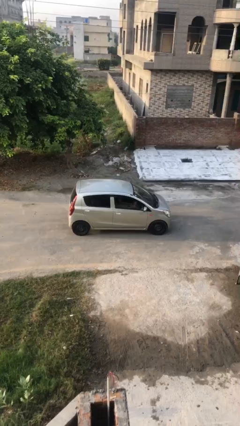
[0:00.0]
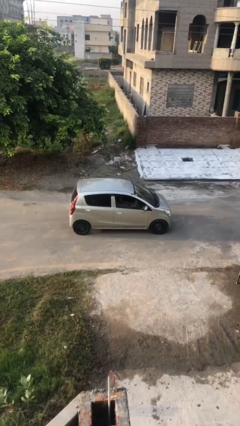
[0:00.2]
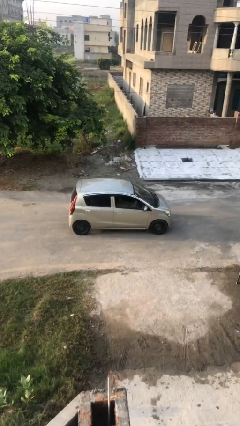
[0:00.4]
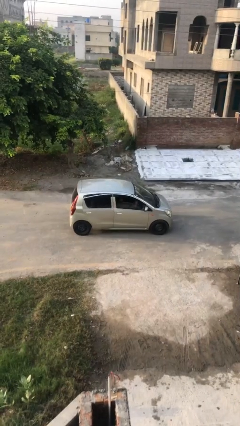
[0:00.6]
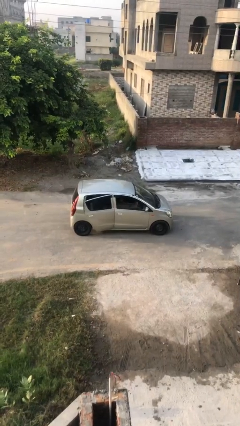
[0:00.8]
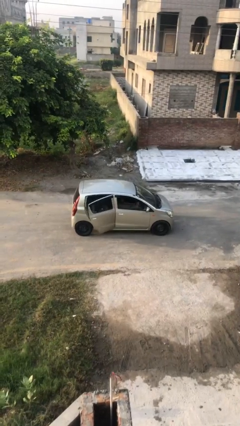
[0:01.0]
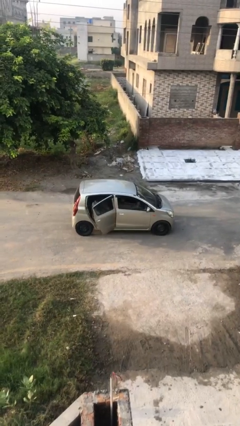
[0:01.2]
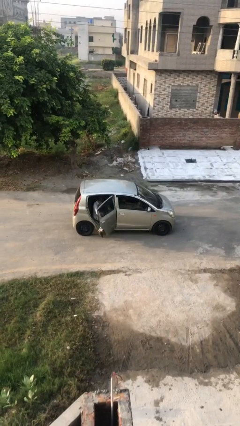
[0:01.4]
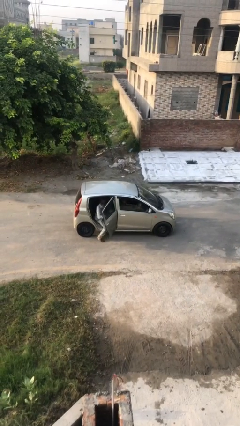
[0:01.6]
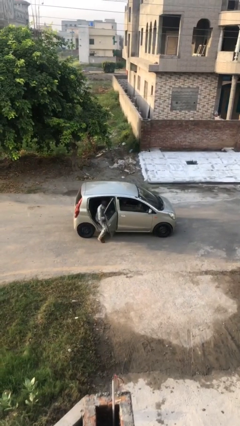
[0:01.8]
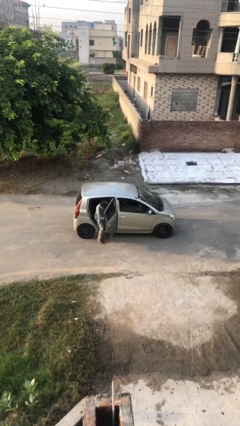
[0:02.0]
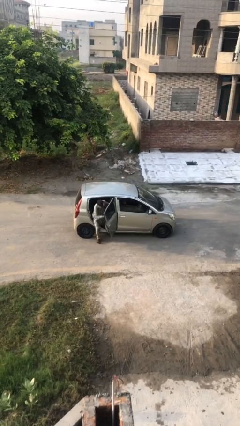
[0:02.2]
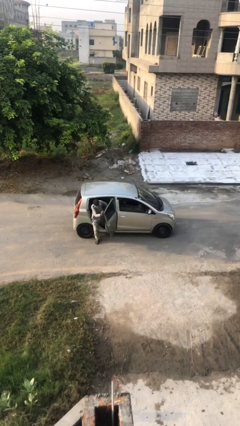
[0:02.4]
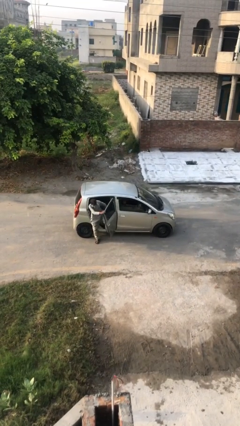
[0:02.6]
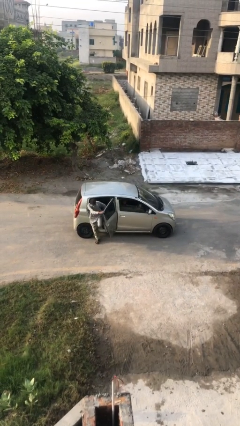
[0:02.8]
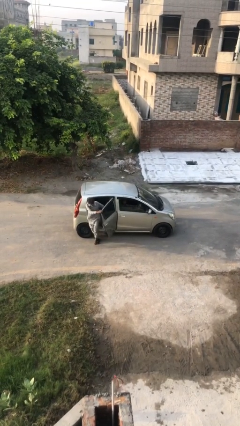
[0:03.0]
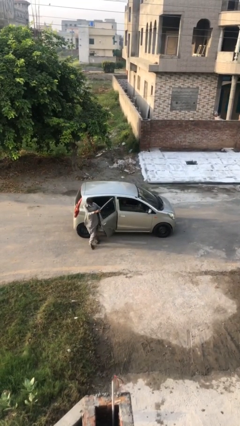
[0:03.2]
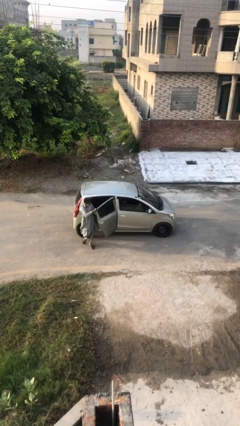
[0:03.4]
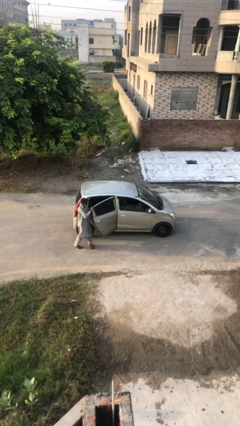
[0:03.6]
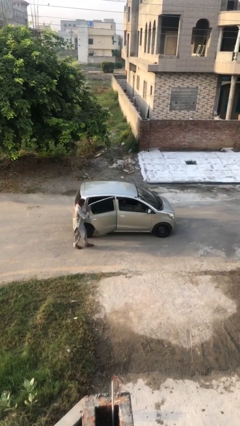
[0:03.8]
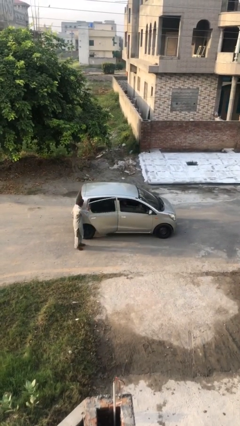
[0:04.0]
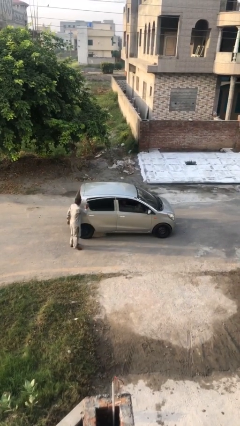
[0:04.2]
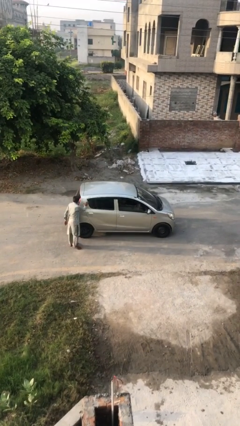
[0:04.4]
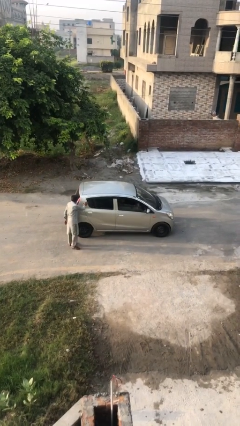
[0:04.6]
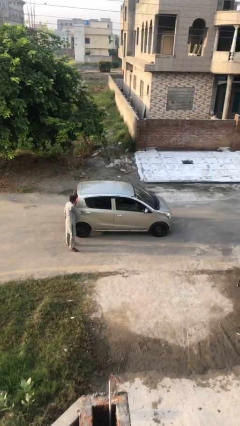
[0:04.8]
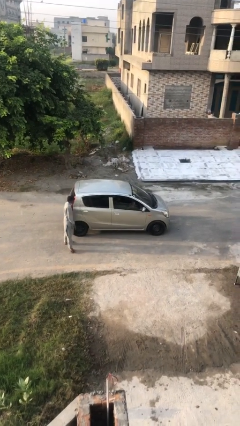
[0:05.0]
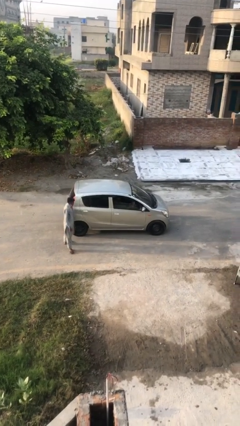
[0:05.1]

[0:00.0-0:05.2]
car drops off person

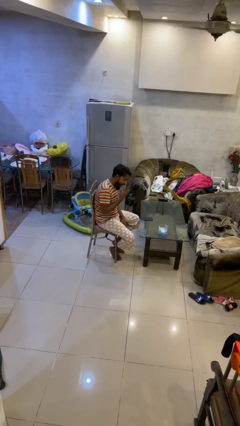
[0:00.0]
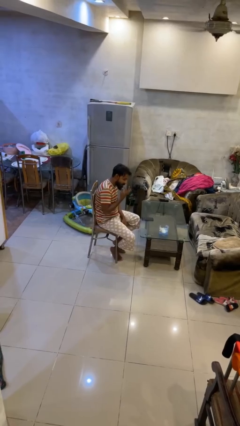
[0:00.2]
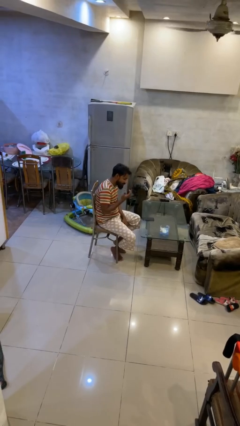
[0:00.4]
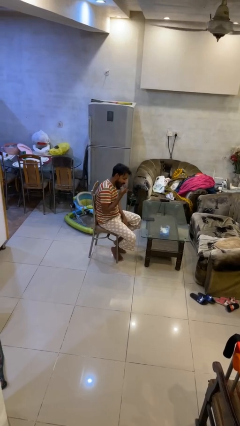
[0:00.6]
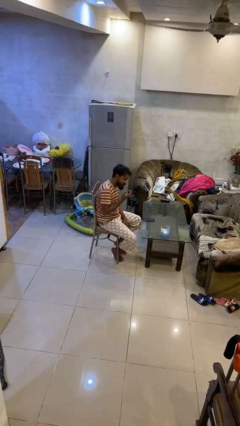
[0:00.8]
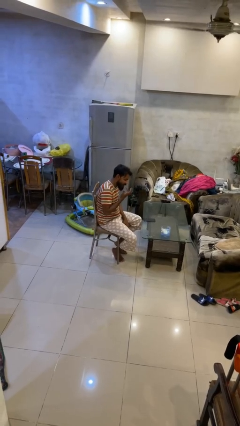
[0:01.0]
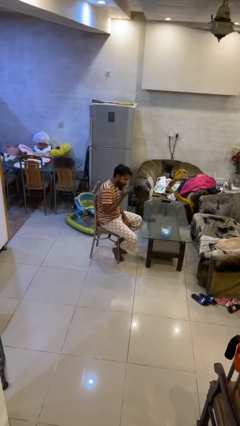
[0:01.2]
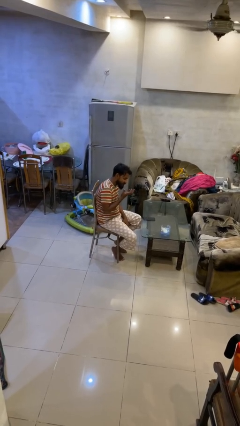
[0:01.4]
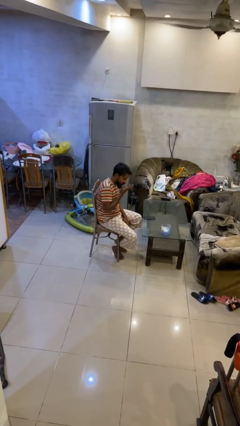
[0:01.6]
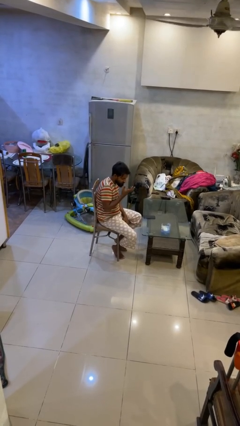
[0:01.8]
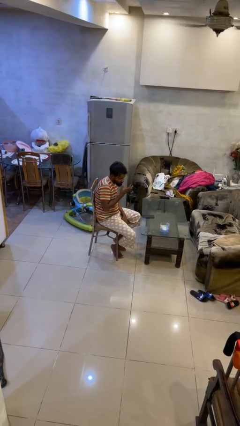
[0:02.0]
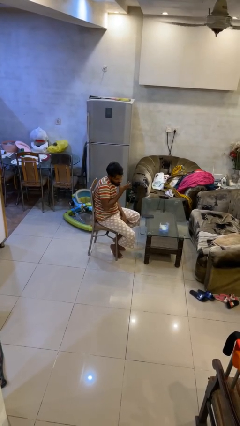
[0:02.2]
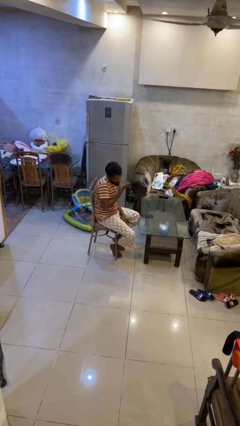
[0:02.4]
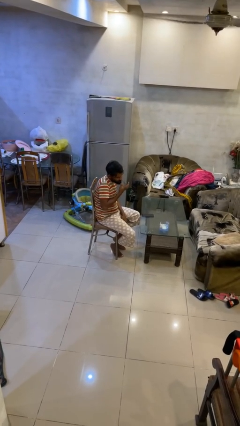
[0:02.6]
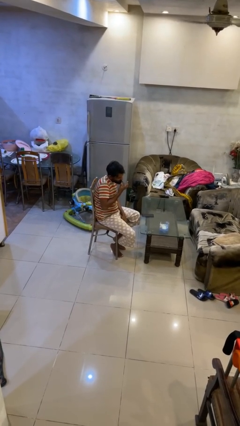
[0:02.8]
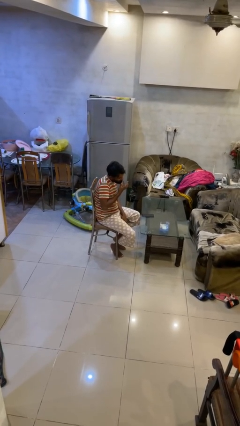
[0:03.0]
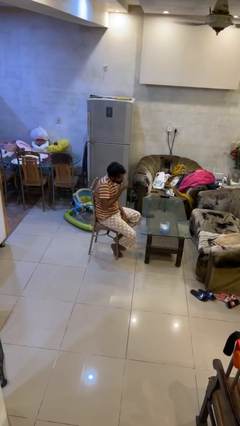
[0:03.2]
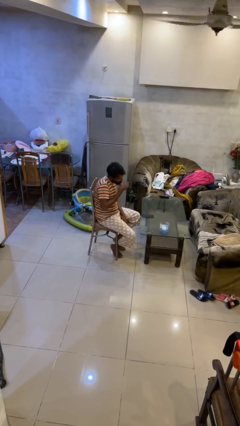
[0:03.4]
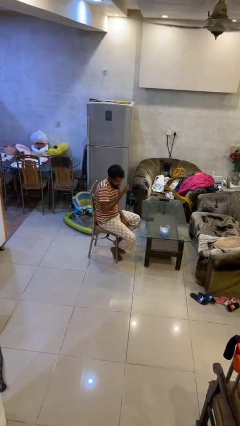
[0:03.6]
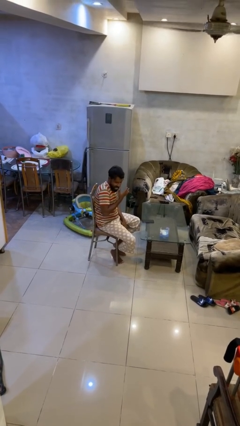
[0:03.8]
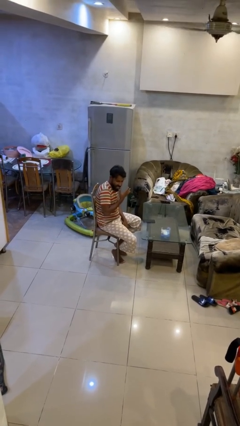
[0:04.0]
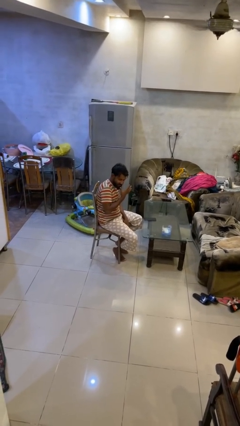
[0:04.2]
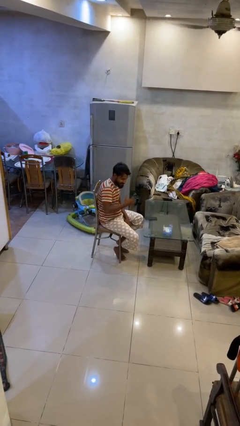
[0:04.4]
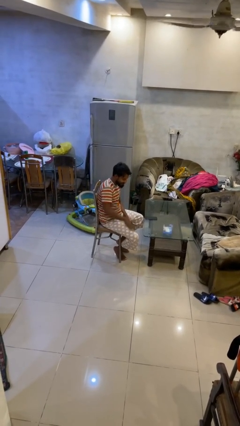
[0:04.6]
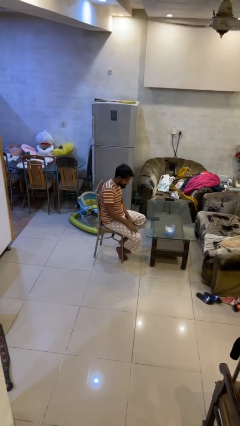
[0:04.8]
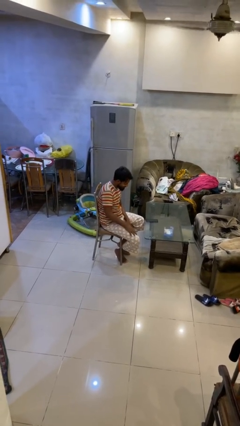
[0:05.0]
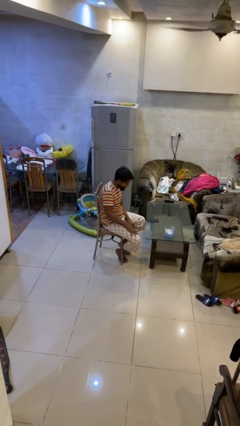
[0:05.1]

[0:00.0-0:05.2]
person licks fingers

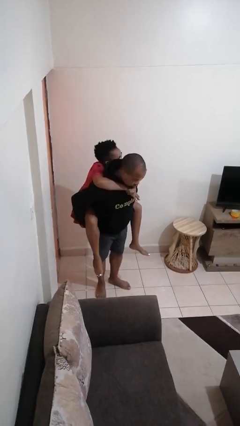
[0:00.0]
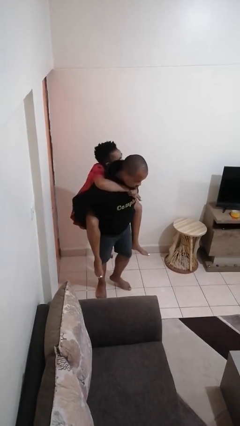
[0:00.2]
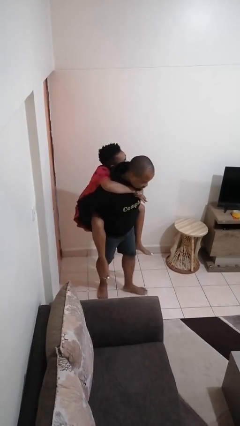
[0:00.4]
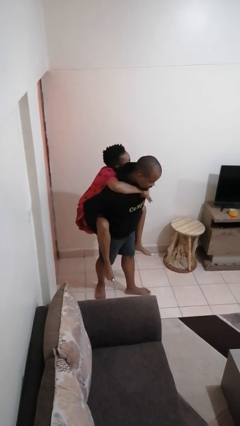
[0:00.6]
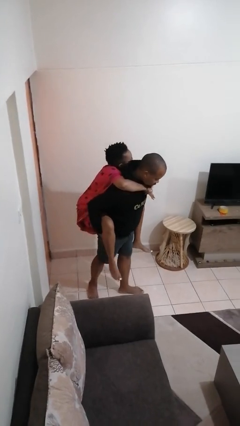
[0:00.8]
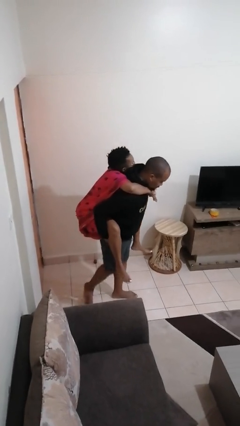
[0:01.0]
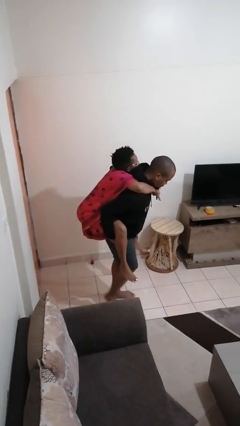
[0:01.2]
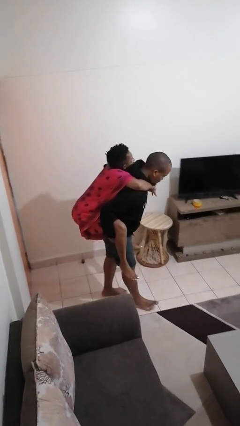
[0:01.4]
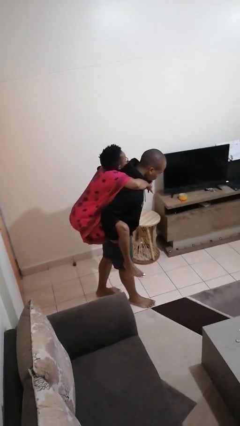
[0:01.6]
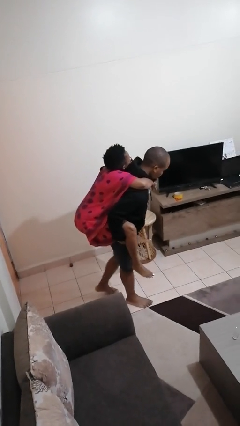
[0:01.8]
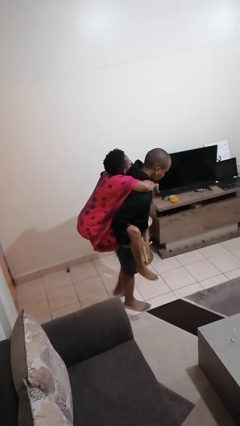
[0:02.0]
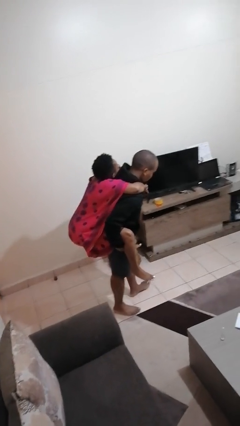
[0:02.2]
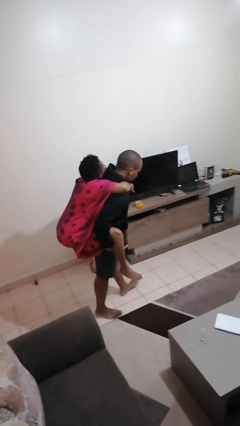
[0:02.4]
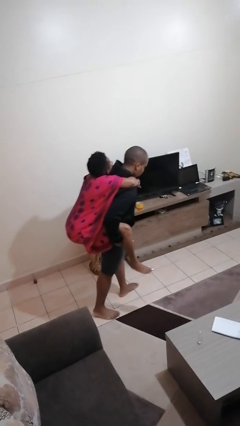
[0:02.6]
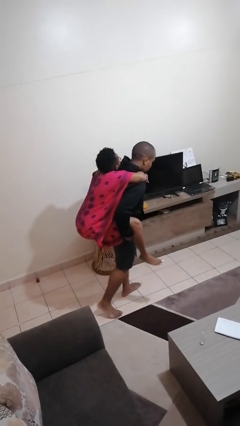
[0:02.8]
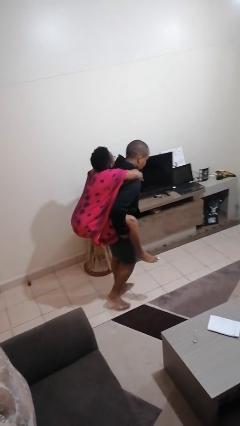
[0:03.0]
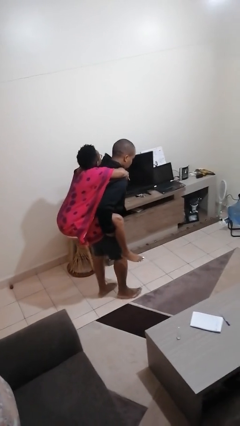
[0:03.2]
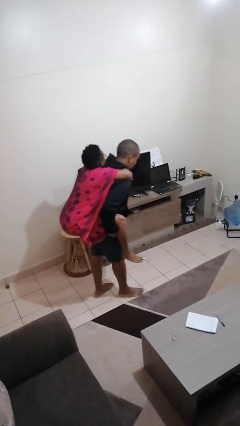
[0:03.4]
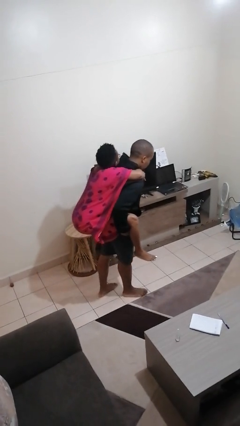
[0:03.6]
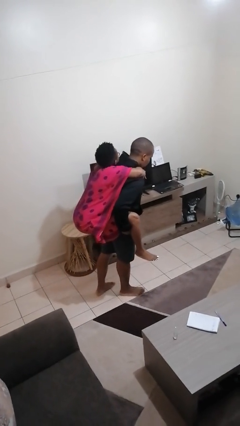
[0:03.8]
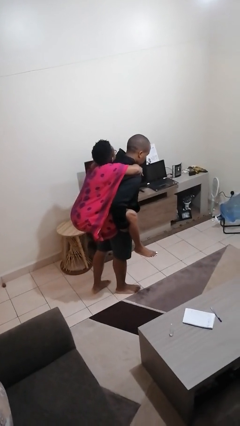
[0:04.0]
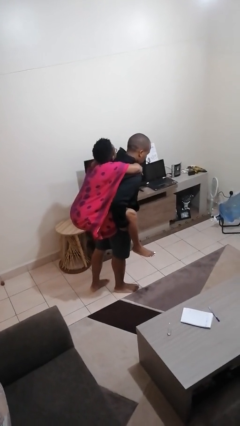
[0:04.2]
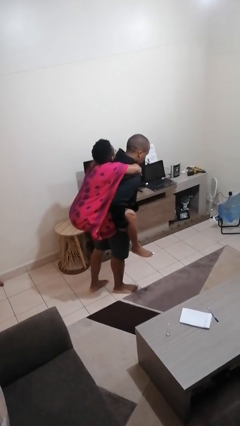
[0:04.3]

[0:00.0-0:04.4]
person carries person on back

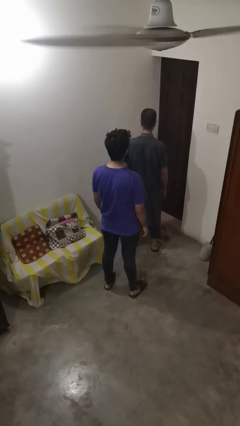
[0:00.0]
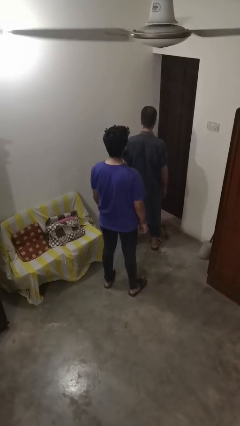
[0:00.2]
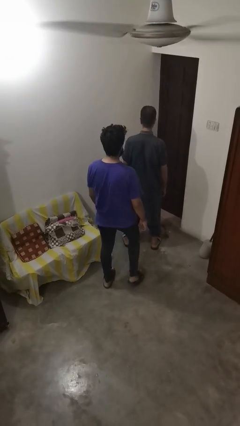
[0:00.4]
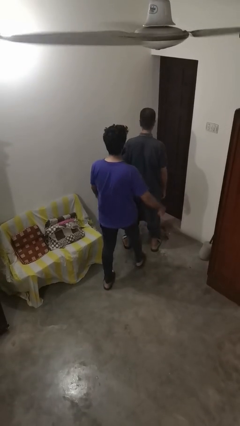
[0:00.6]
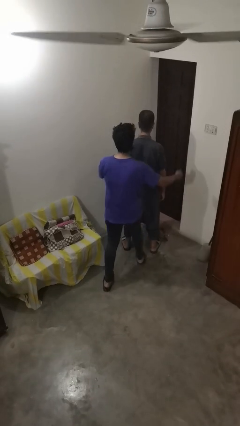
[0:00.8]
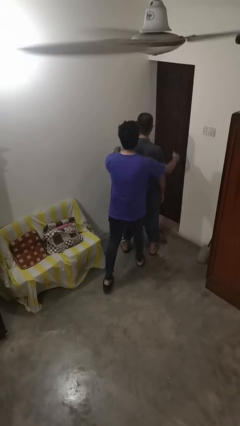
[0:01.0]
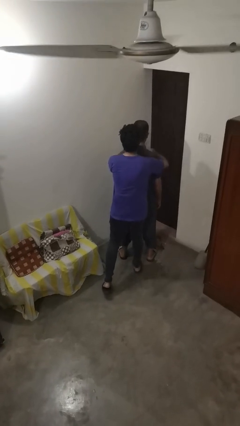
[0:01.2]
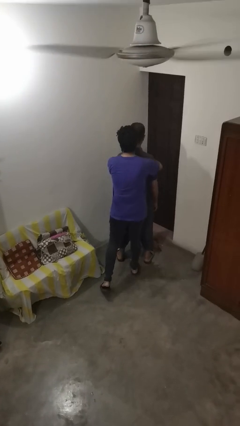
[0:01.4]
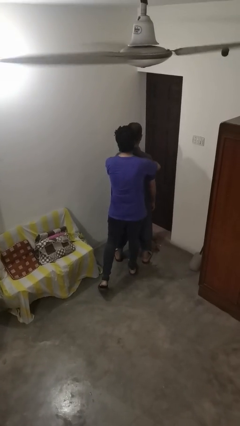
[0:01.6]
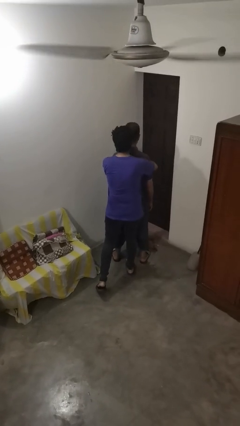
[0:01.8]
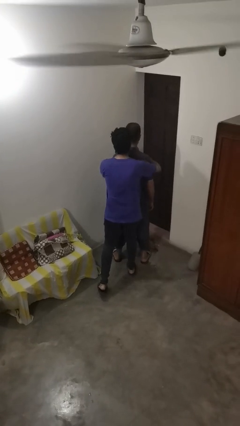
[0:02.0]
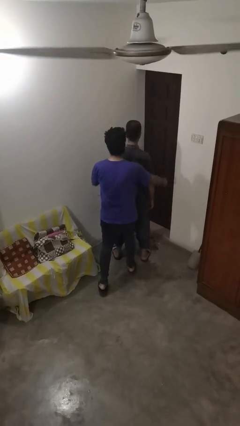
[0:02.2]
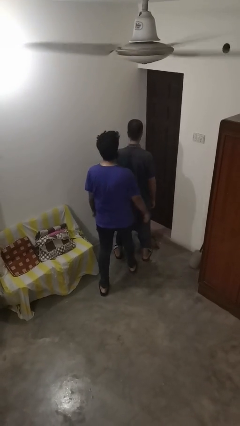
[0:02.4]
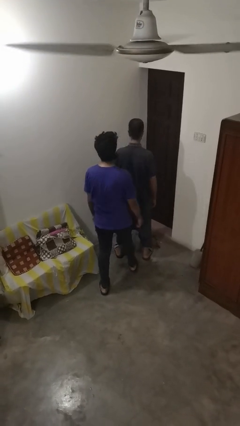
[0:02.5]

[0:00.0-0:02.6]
person hugs person from behind
